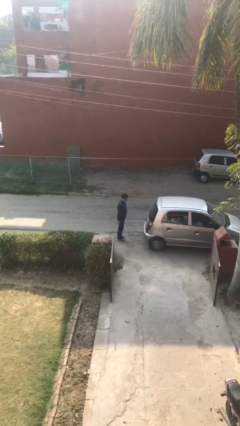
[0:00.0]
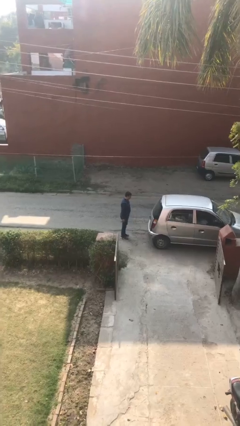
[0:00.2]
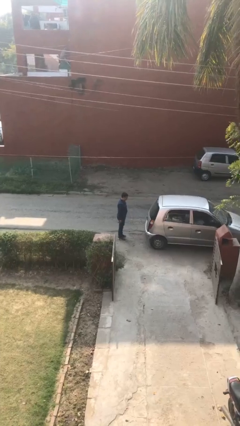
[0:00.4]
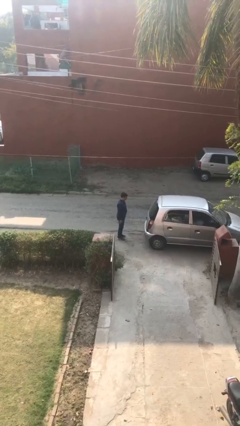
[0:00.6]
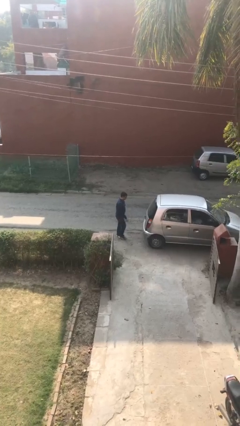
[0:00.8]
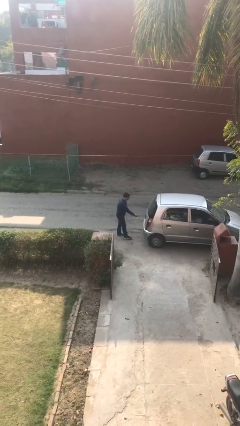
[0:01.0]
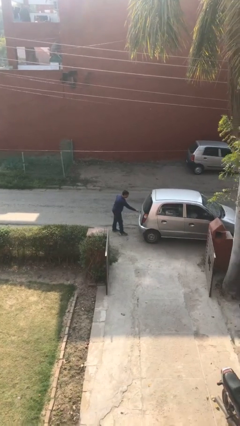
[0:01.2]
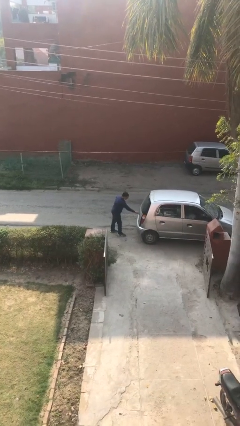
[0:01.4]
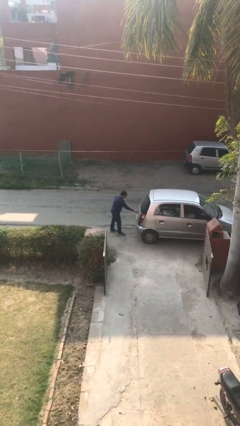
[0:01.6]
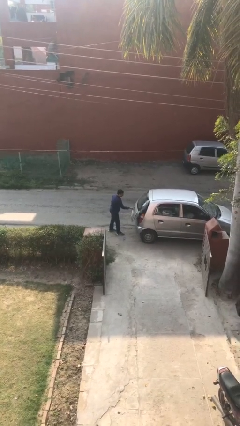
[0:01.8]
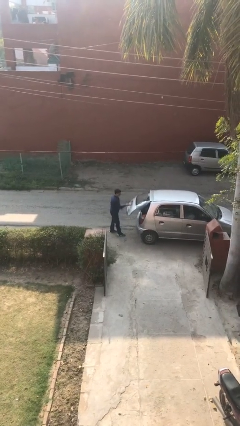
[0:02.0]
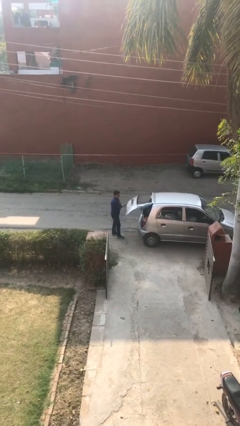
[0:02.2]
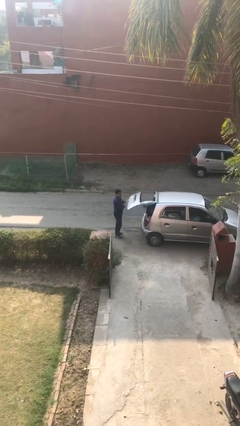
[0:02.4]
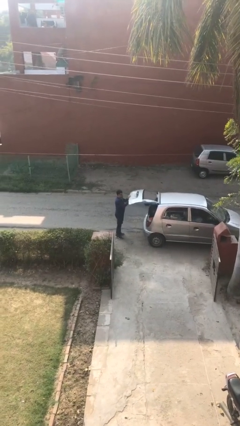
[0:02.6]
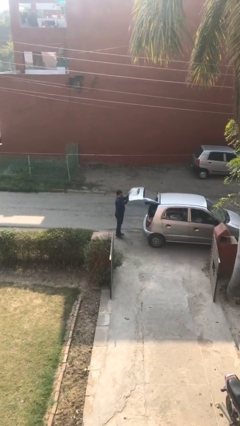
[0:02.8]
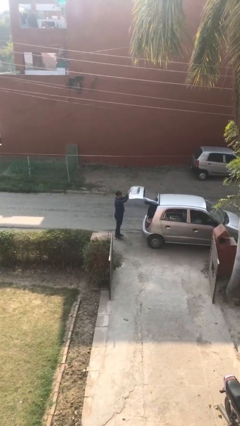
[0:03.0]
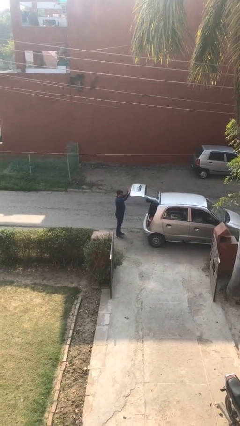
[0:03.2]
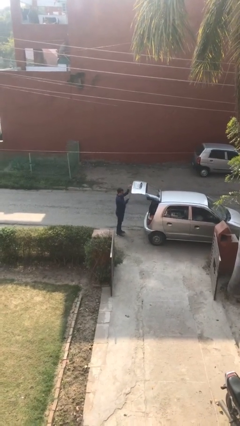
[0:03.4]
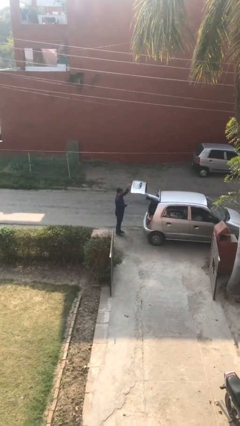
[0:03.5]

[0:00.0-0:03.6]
person opens car trunk

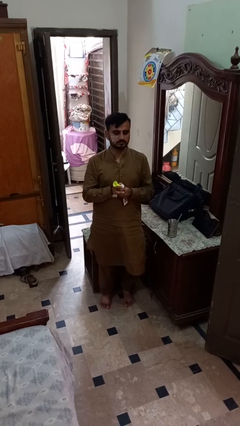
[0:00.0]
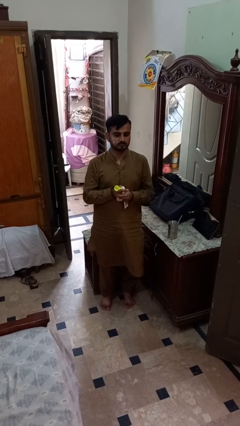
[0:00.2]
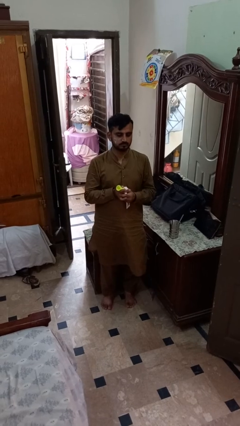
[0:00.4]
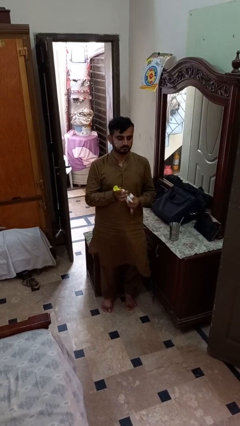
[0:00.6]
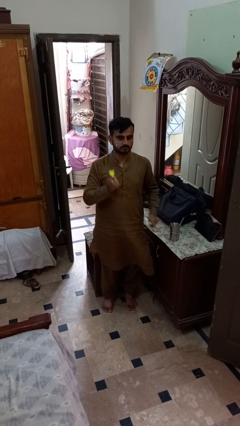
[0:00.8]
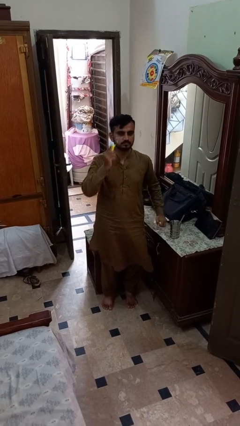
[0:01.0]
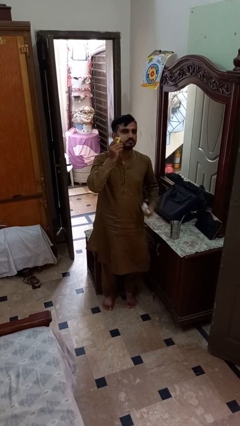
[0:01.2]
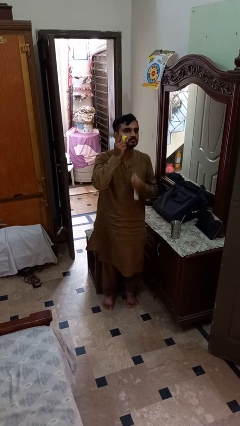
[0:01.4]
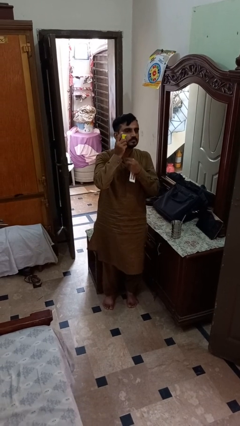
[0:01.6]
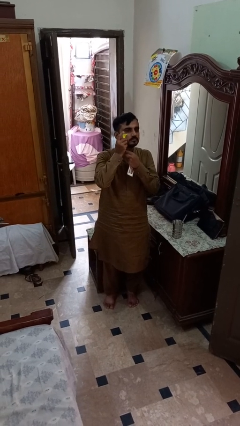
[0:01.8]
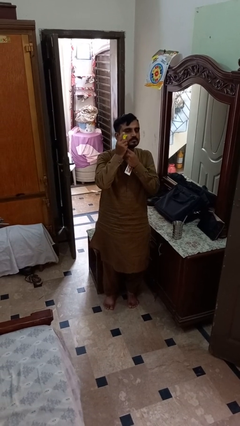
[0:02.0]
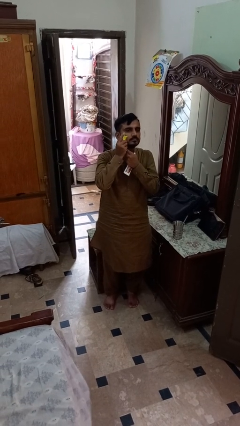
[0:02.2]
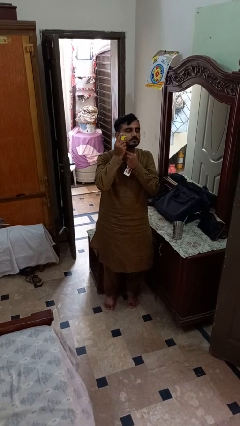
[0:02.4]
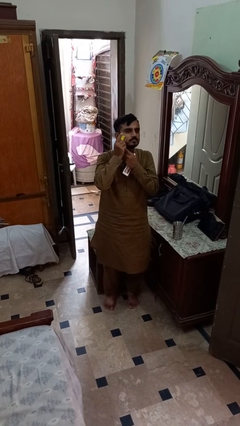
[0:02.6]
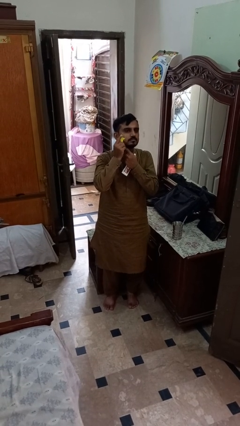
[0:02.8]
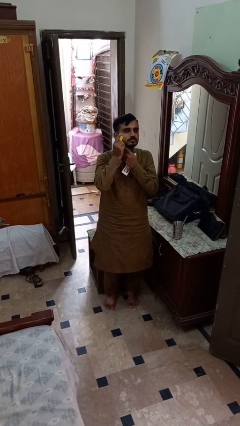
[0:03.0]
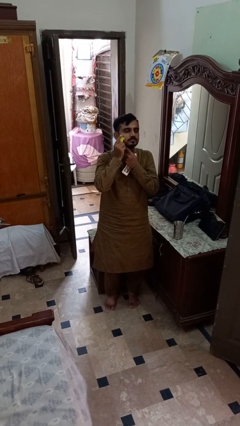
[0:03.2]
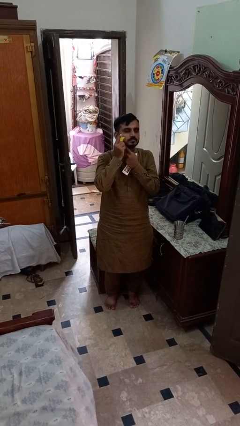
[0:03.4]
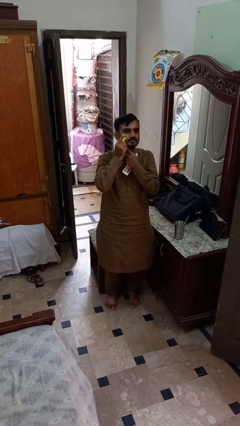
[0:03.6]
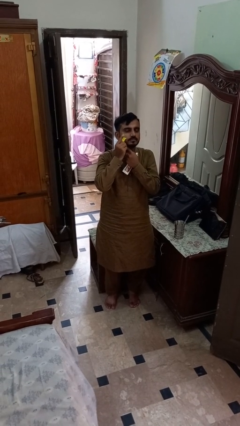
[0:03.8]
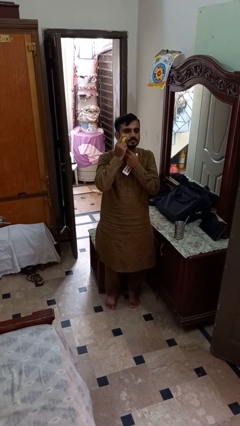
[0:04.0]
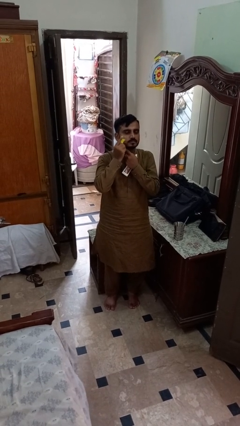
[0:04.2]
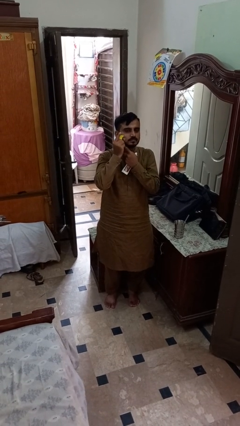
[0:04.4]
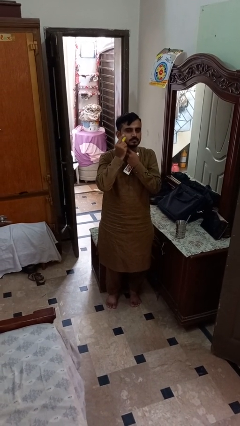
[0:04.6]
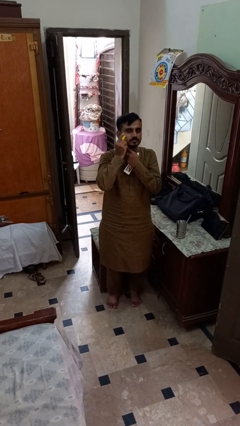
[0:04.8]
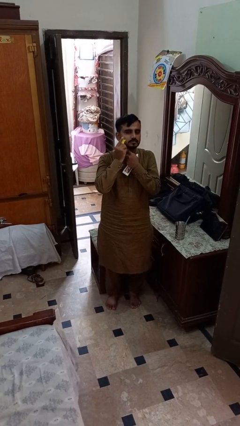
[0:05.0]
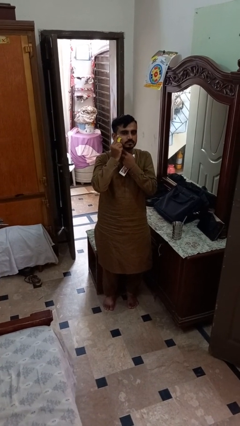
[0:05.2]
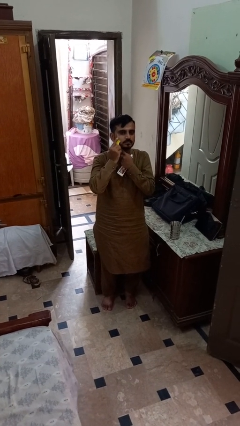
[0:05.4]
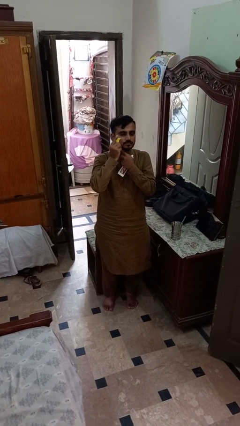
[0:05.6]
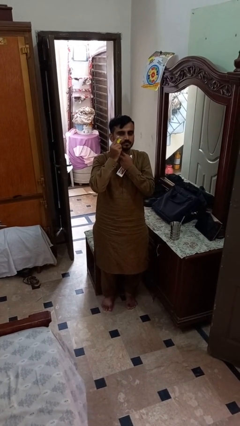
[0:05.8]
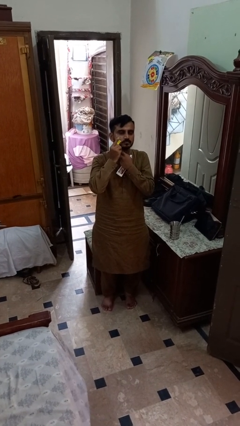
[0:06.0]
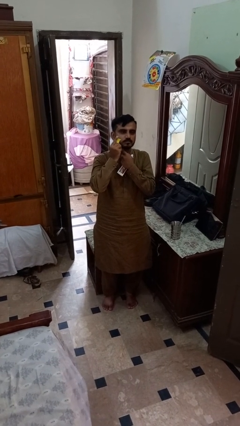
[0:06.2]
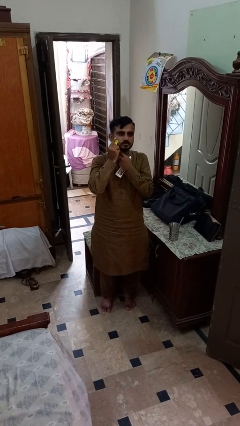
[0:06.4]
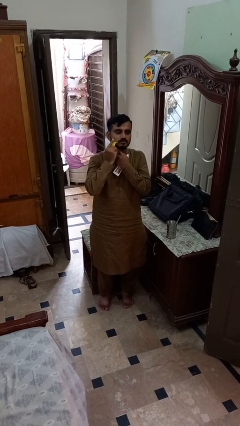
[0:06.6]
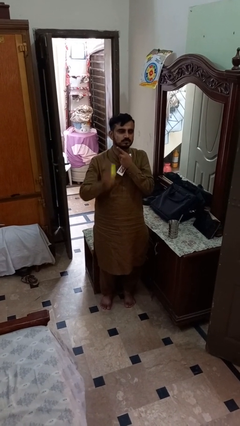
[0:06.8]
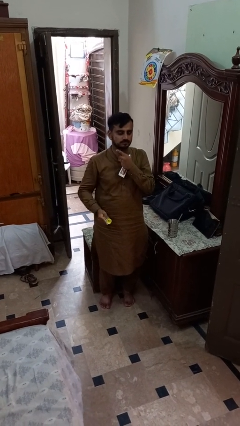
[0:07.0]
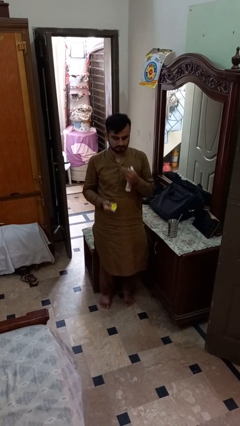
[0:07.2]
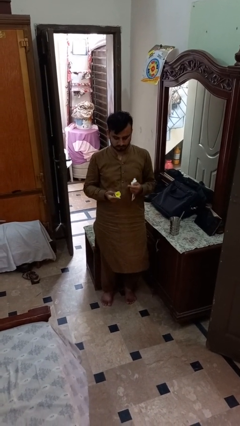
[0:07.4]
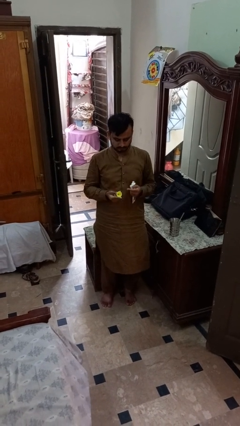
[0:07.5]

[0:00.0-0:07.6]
person shaves face

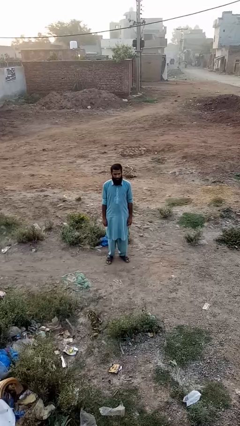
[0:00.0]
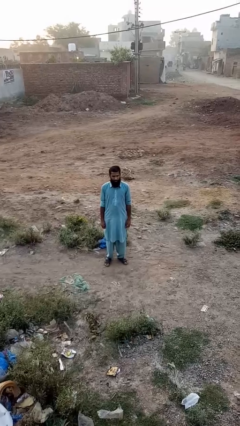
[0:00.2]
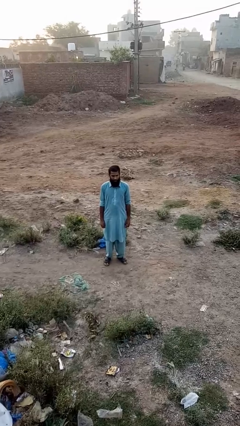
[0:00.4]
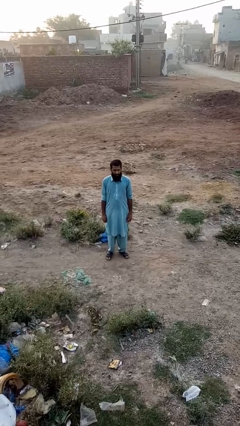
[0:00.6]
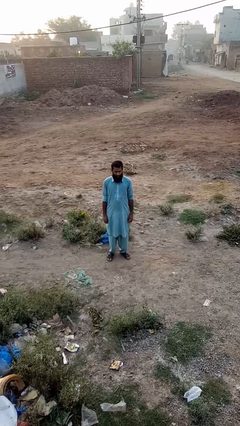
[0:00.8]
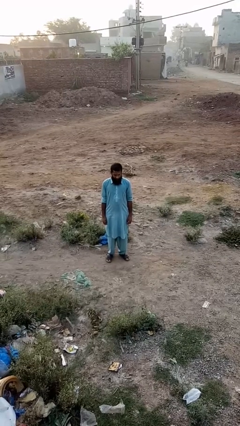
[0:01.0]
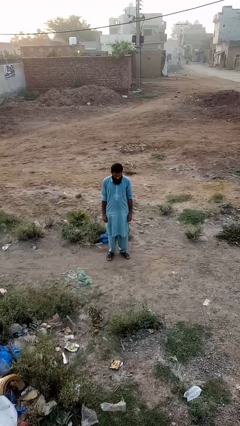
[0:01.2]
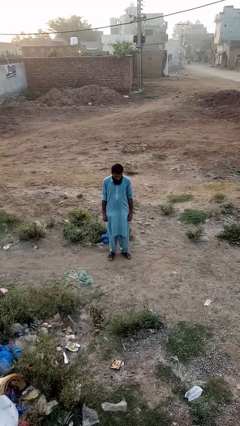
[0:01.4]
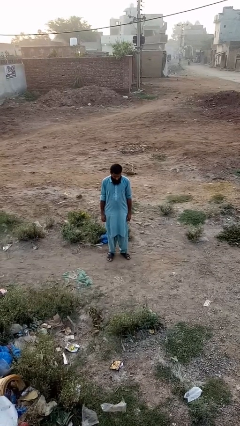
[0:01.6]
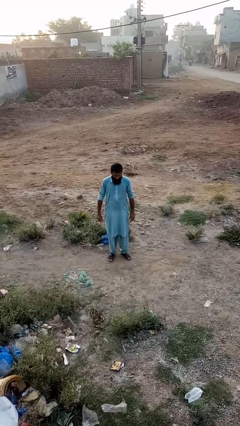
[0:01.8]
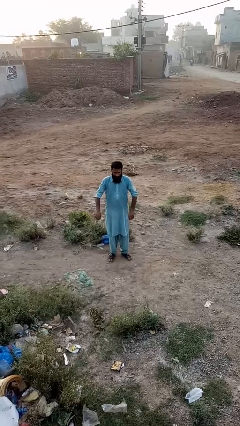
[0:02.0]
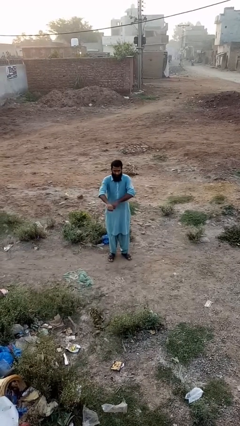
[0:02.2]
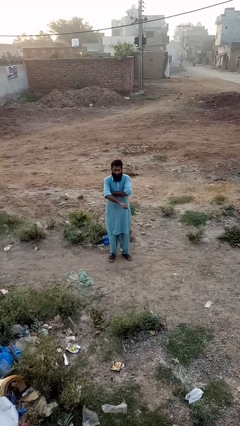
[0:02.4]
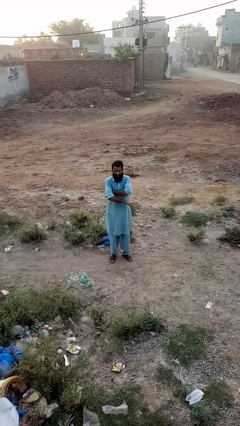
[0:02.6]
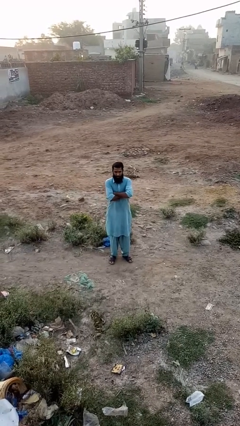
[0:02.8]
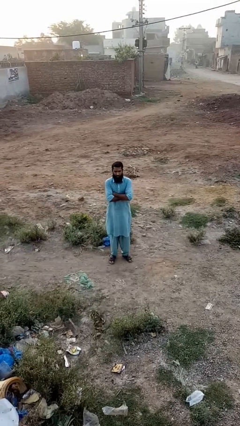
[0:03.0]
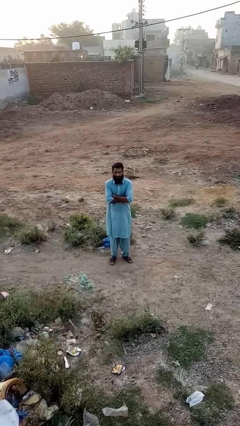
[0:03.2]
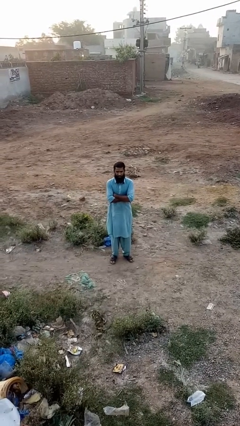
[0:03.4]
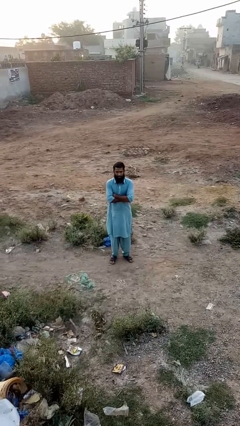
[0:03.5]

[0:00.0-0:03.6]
person crosses arms

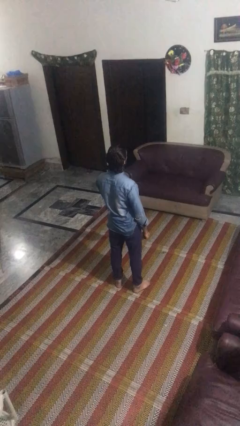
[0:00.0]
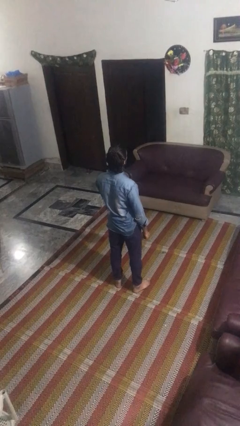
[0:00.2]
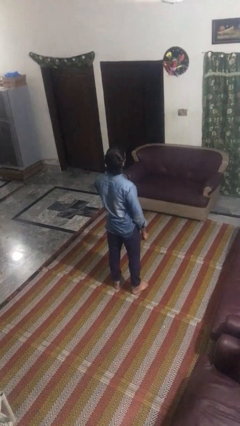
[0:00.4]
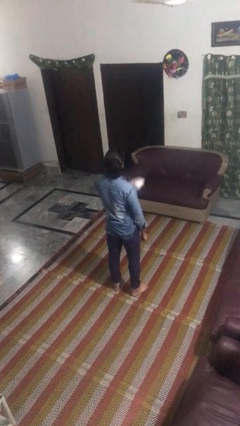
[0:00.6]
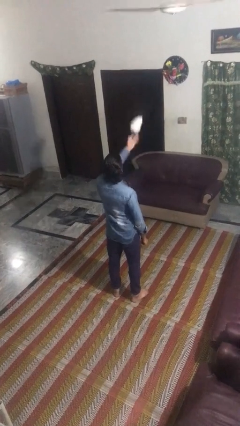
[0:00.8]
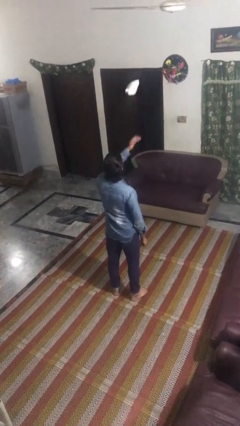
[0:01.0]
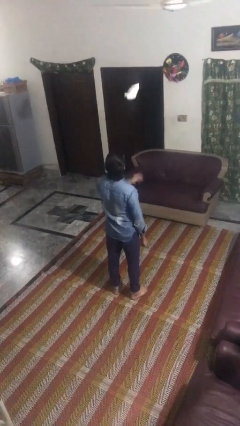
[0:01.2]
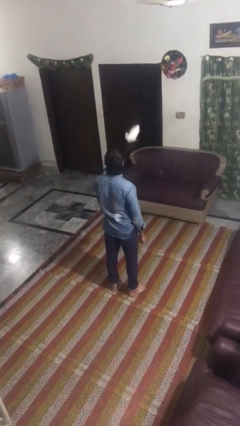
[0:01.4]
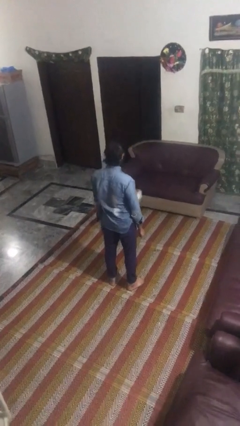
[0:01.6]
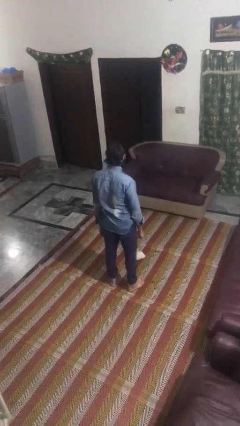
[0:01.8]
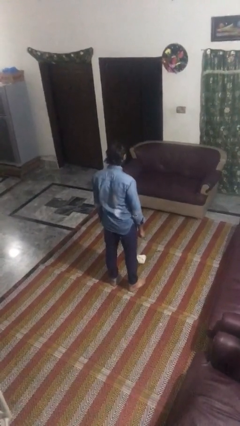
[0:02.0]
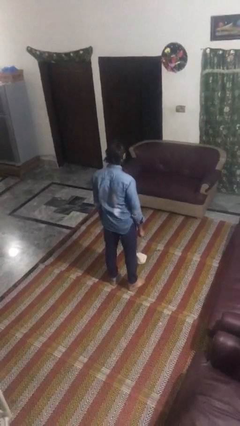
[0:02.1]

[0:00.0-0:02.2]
person throws object into air

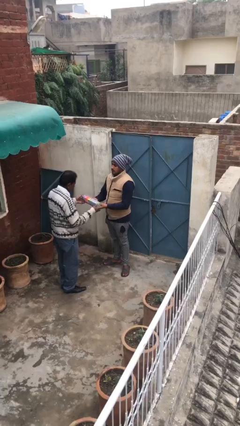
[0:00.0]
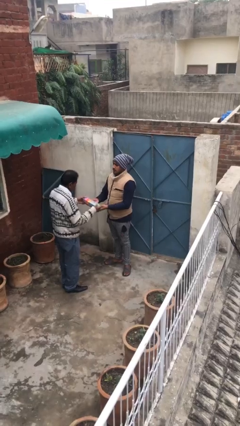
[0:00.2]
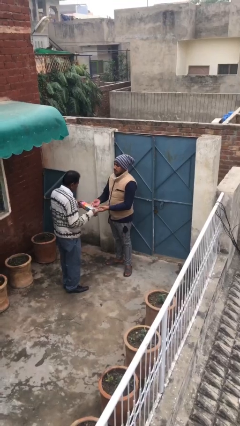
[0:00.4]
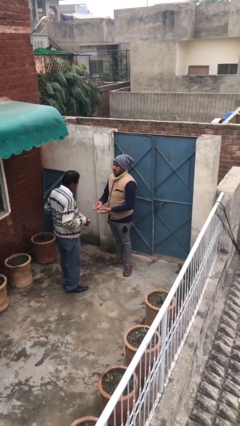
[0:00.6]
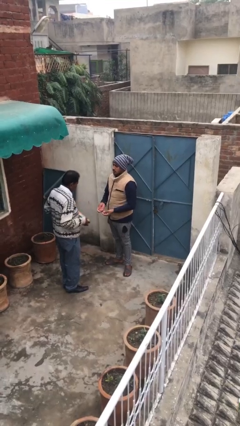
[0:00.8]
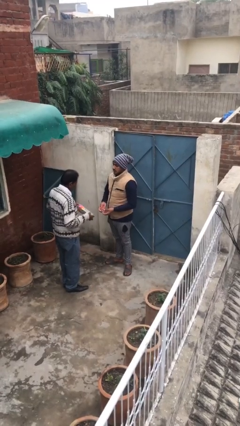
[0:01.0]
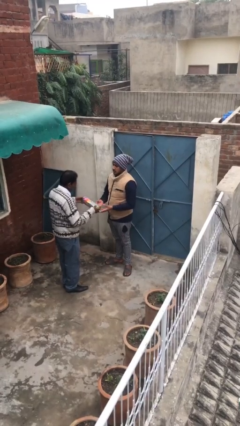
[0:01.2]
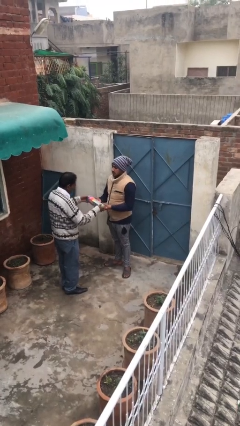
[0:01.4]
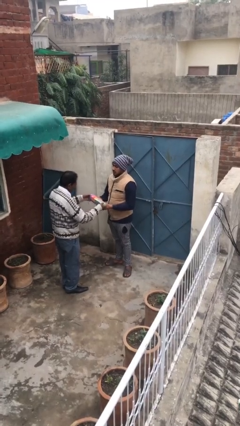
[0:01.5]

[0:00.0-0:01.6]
person transfers object to person
